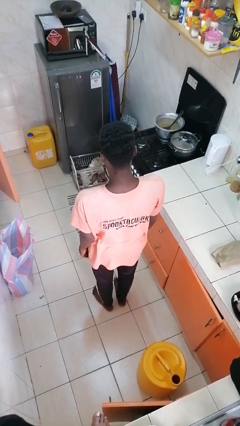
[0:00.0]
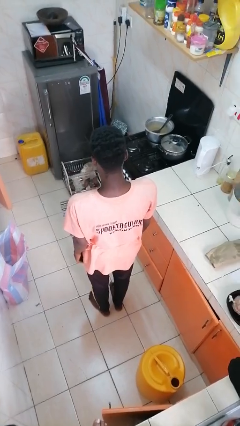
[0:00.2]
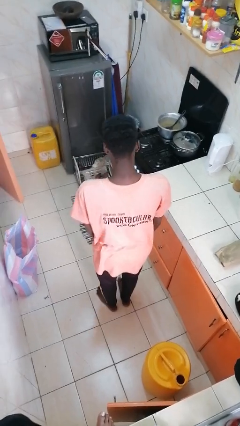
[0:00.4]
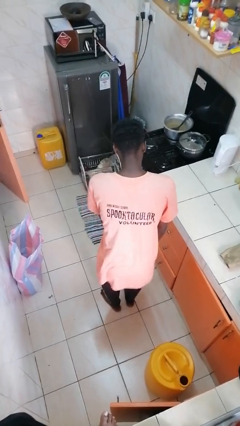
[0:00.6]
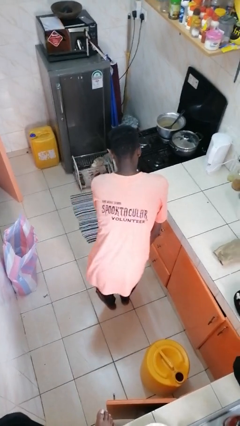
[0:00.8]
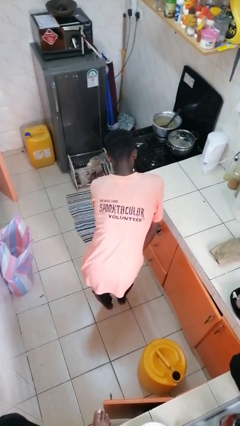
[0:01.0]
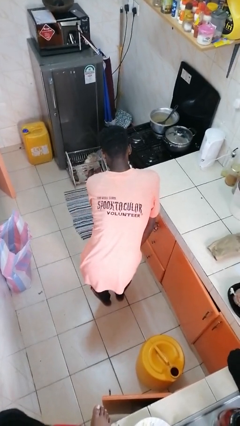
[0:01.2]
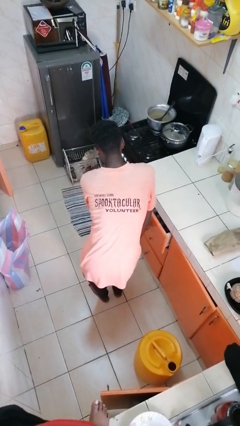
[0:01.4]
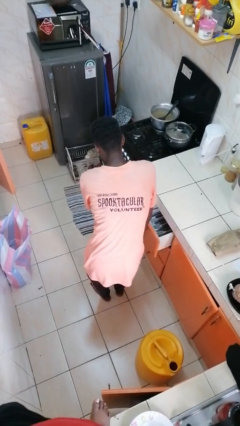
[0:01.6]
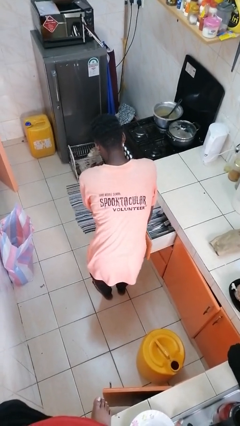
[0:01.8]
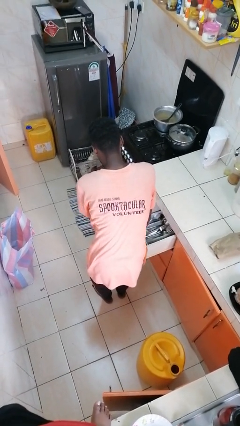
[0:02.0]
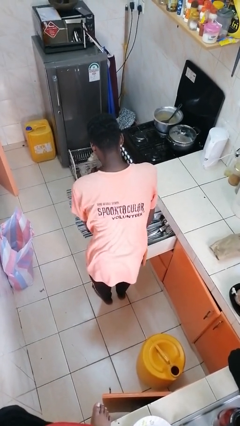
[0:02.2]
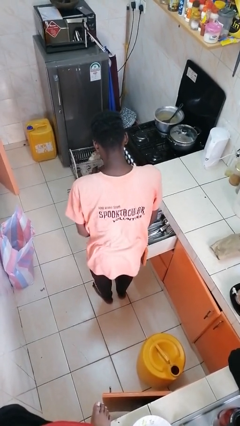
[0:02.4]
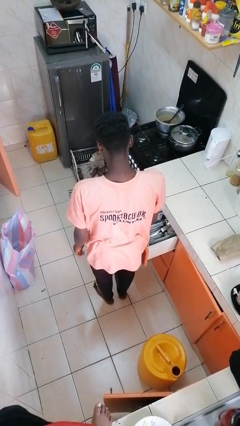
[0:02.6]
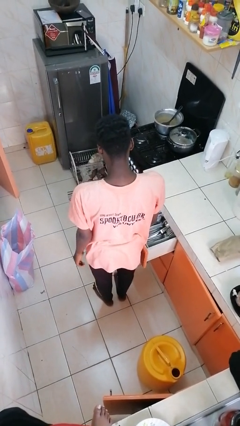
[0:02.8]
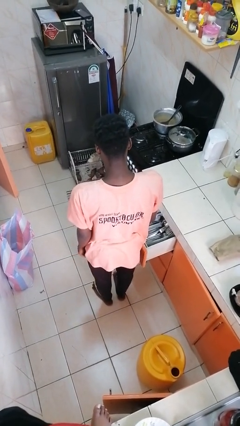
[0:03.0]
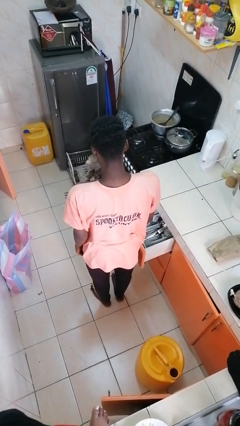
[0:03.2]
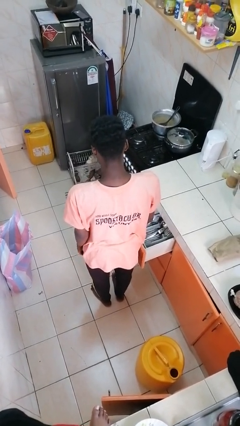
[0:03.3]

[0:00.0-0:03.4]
person opens kitchen drawer

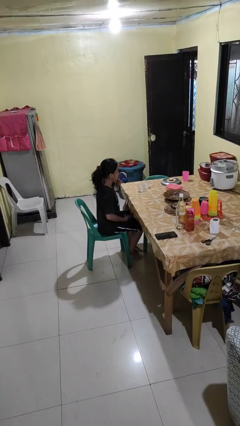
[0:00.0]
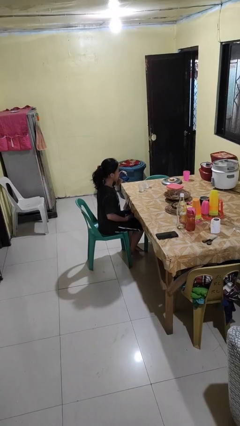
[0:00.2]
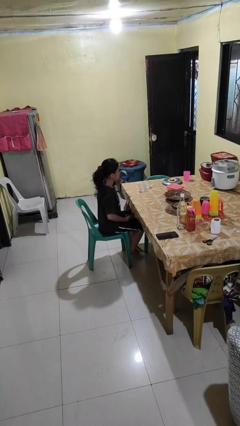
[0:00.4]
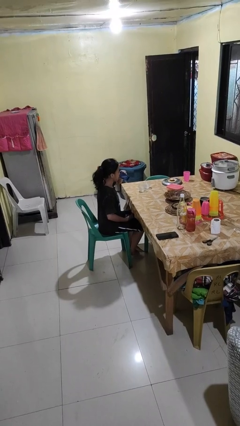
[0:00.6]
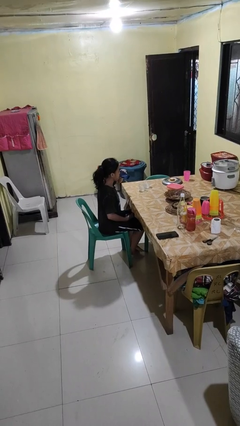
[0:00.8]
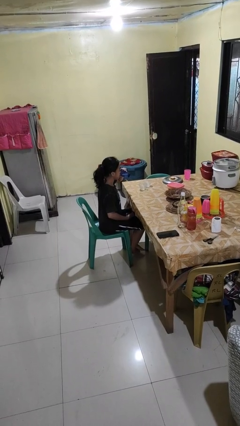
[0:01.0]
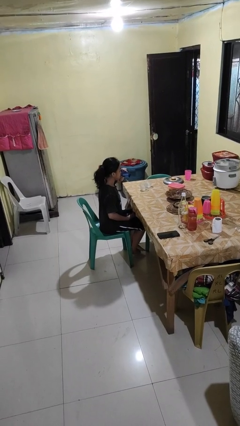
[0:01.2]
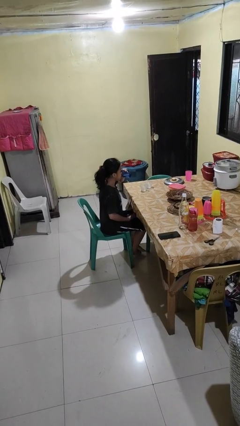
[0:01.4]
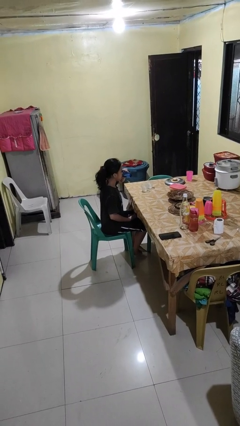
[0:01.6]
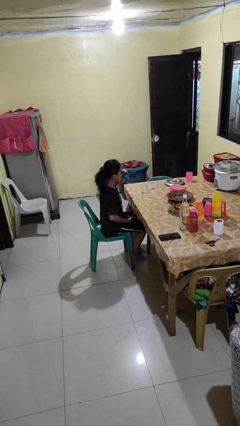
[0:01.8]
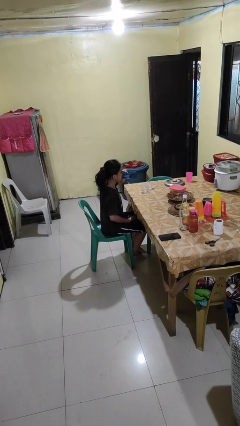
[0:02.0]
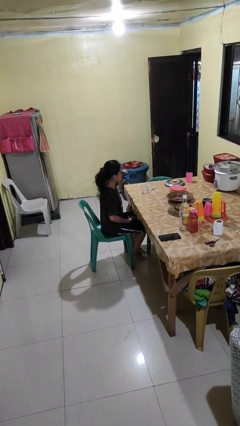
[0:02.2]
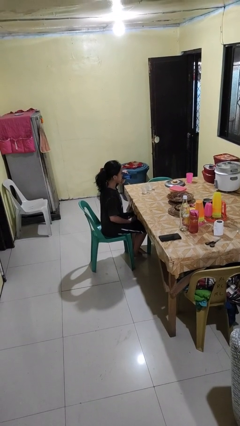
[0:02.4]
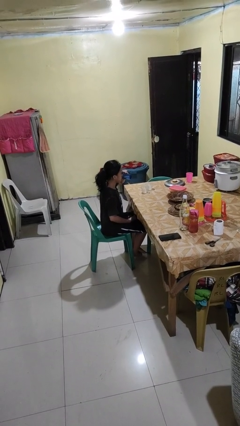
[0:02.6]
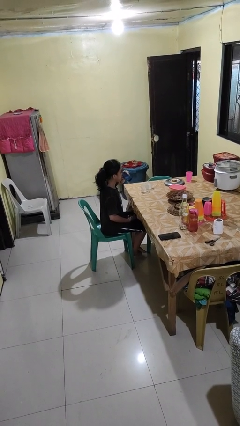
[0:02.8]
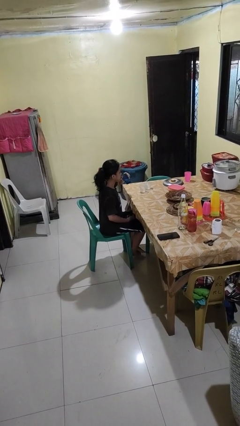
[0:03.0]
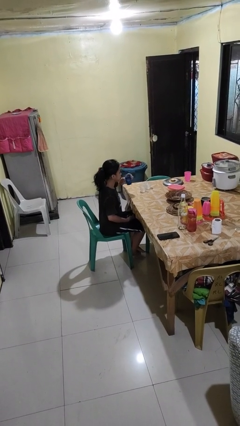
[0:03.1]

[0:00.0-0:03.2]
person drinks from shotglass

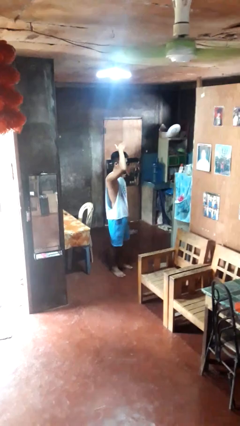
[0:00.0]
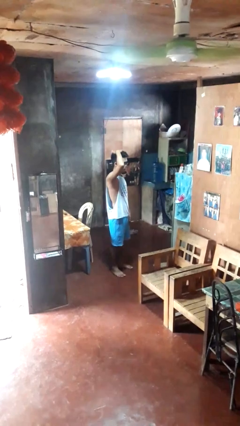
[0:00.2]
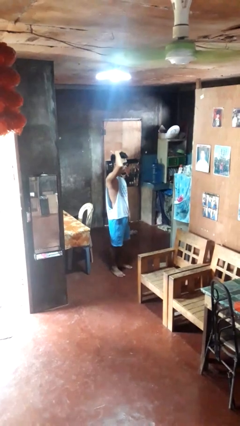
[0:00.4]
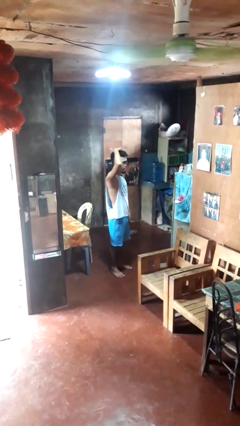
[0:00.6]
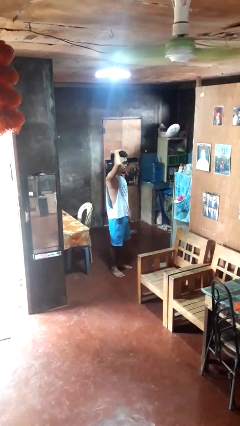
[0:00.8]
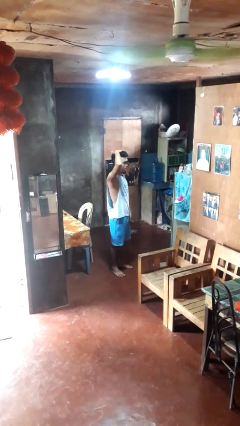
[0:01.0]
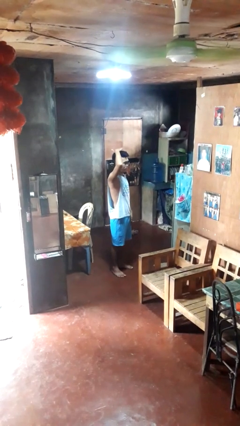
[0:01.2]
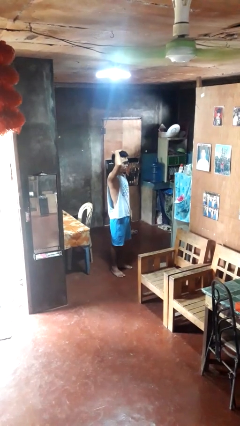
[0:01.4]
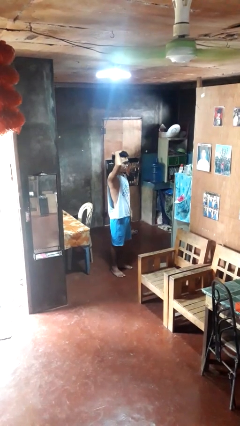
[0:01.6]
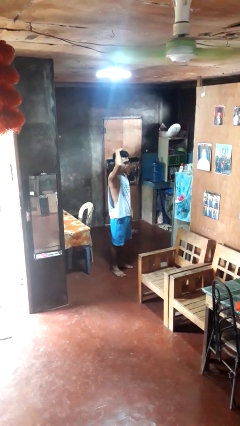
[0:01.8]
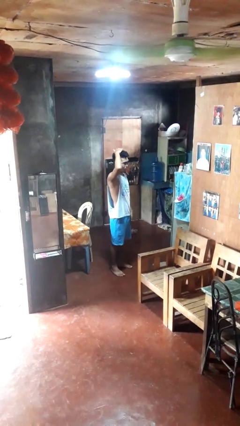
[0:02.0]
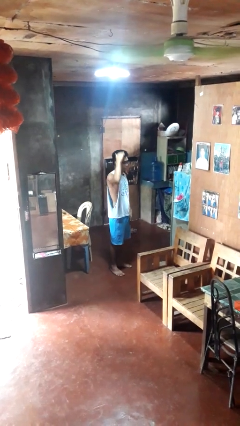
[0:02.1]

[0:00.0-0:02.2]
person pats head

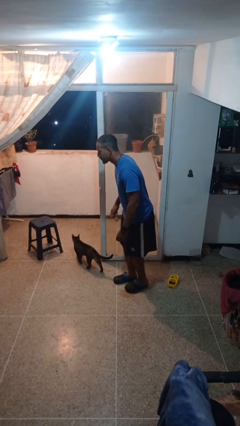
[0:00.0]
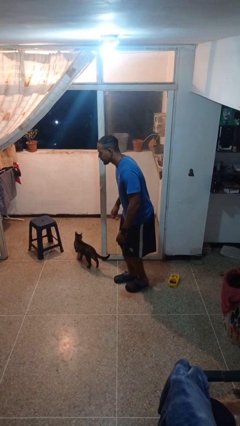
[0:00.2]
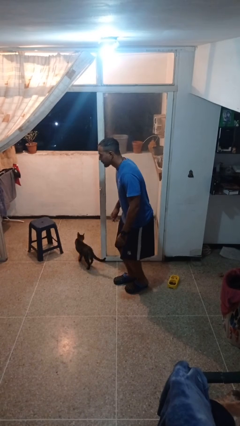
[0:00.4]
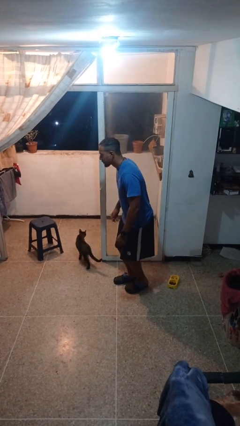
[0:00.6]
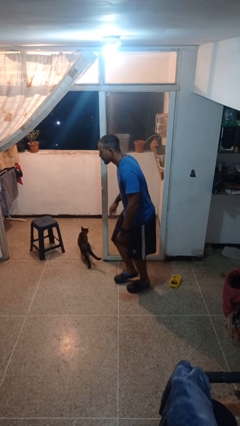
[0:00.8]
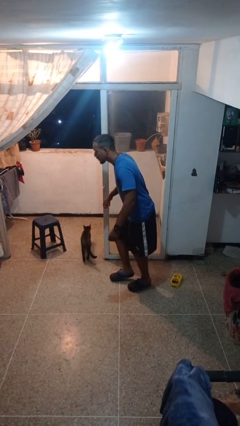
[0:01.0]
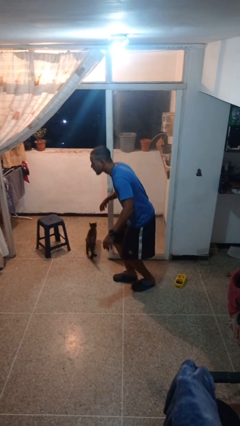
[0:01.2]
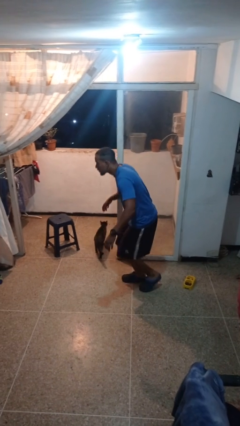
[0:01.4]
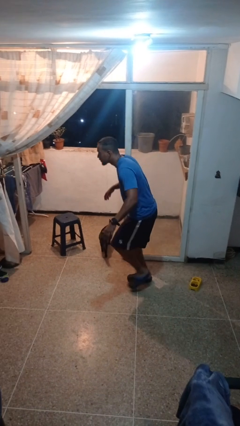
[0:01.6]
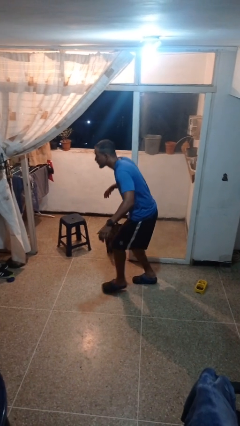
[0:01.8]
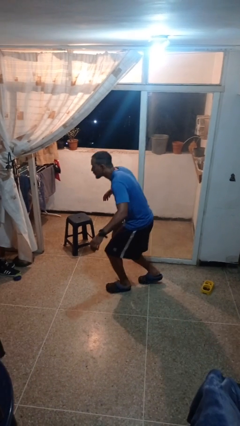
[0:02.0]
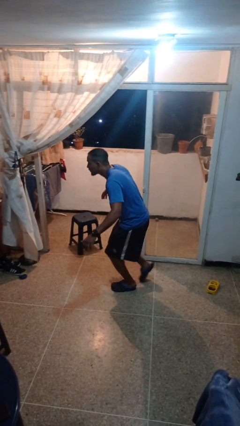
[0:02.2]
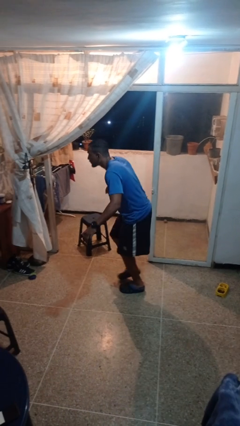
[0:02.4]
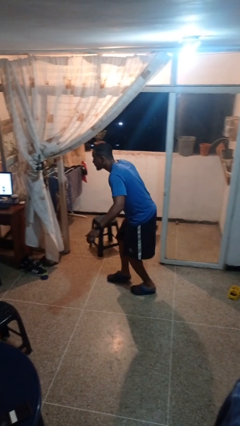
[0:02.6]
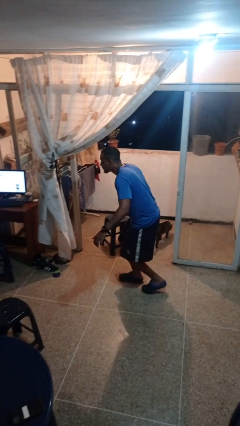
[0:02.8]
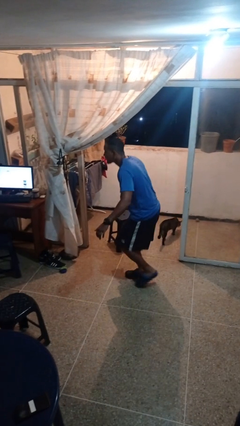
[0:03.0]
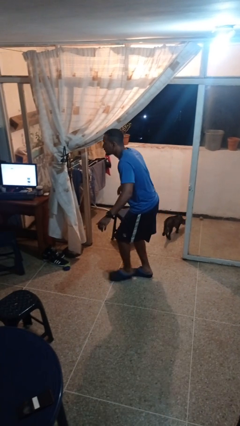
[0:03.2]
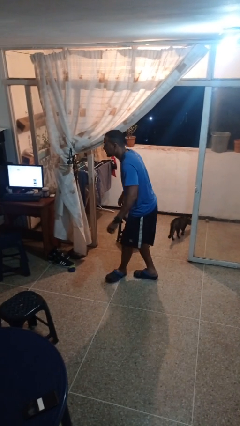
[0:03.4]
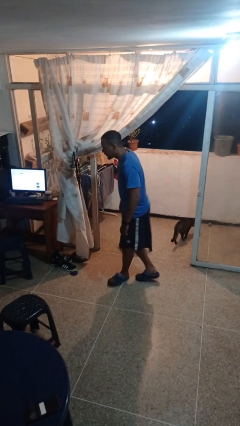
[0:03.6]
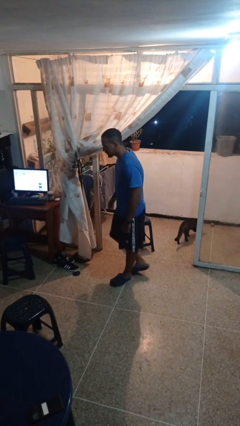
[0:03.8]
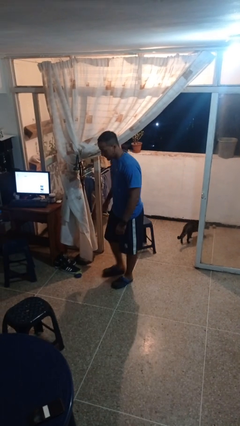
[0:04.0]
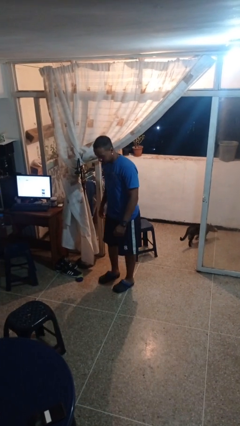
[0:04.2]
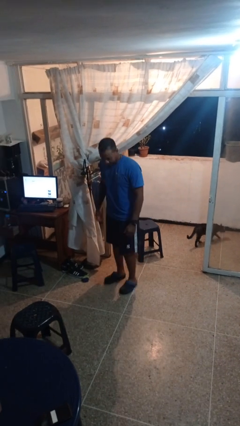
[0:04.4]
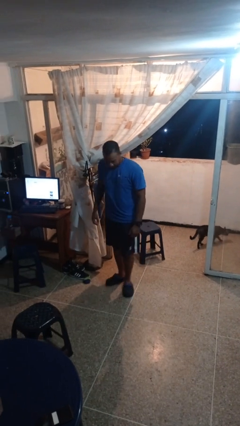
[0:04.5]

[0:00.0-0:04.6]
person walks tiptoe

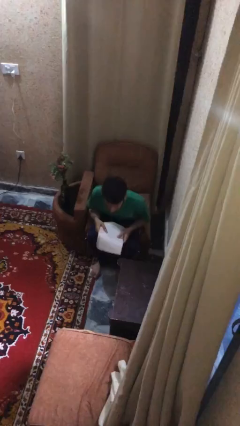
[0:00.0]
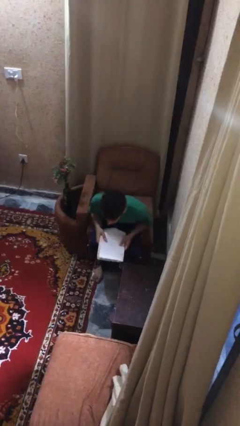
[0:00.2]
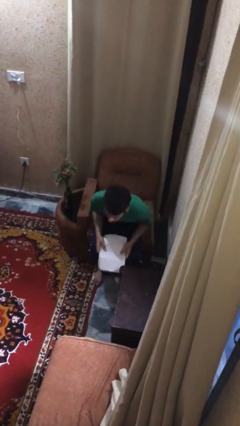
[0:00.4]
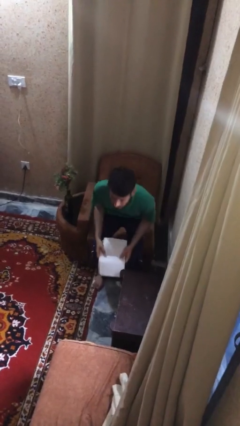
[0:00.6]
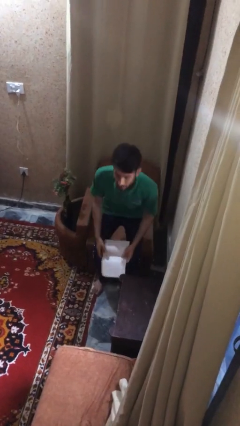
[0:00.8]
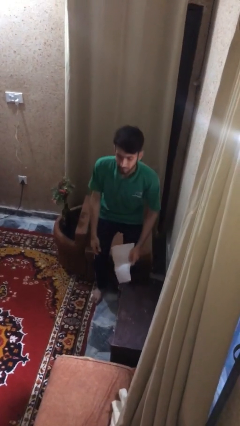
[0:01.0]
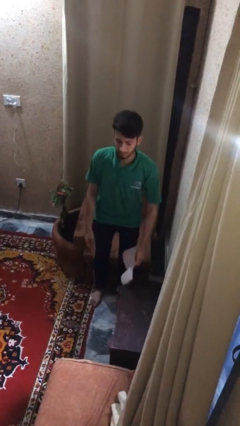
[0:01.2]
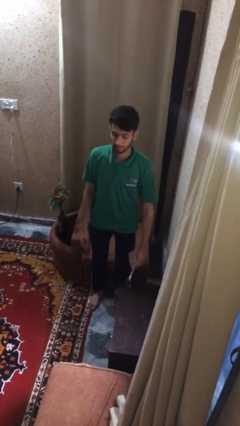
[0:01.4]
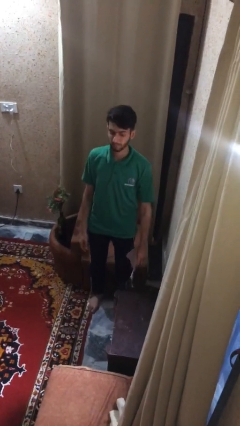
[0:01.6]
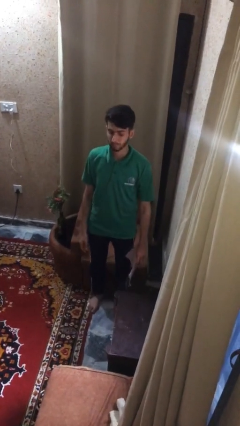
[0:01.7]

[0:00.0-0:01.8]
person stands up

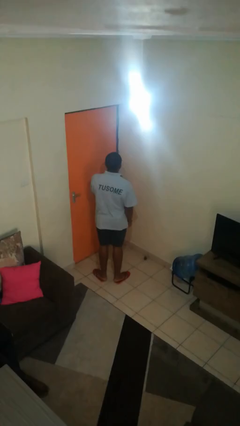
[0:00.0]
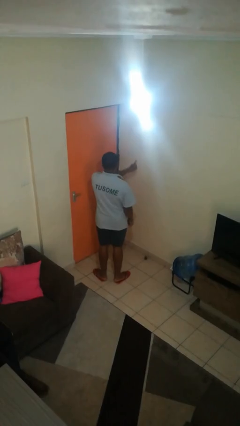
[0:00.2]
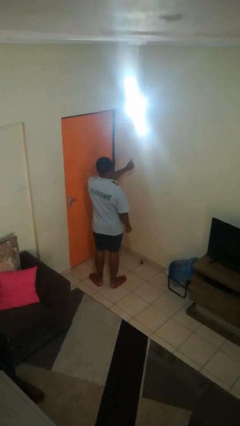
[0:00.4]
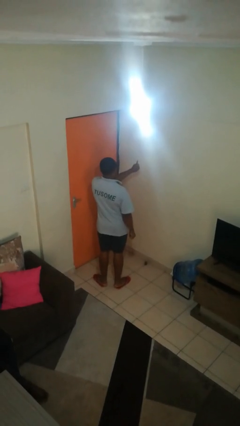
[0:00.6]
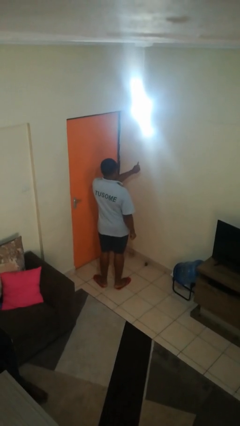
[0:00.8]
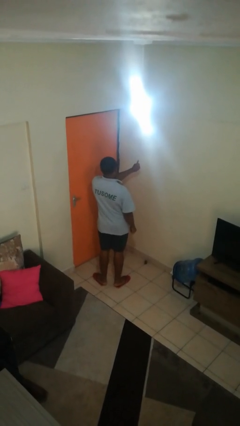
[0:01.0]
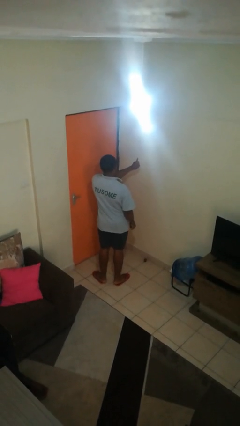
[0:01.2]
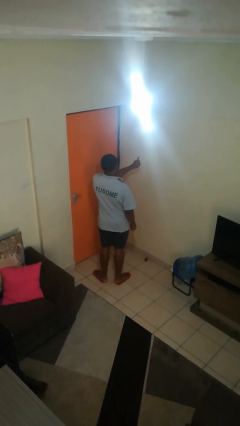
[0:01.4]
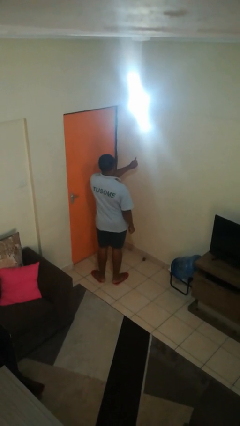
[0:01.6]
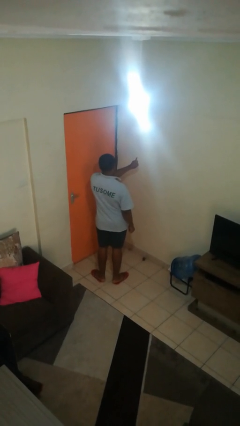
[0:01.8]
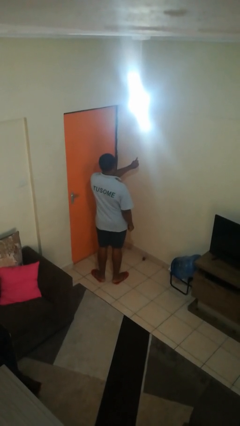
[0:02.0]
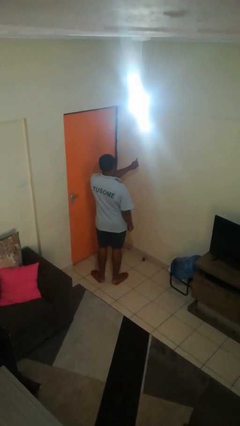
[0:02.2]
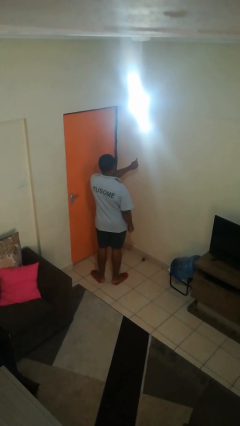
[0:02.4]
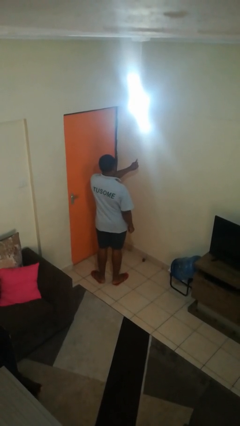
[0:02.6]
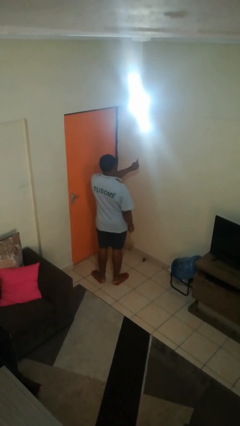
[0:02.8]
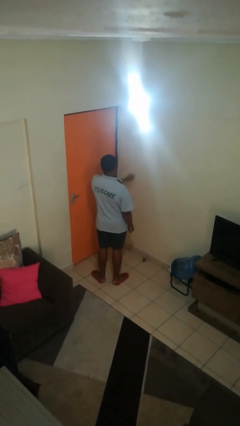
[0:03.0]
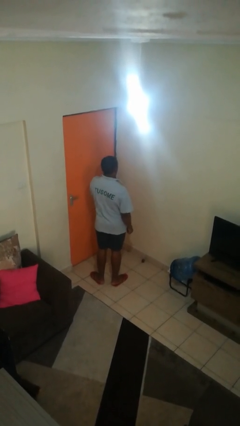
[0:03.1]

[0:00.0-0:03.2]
person gestures number one
